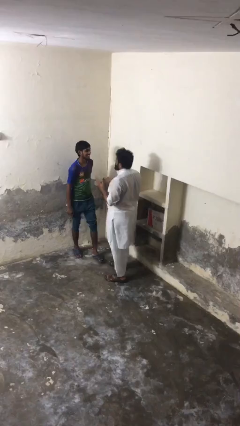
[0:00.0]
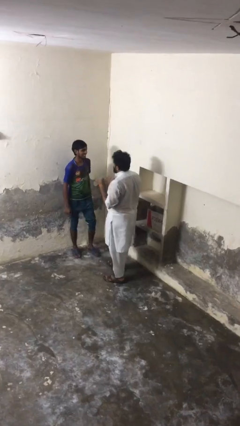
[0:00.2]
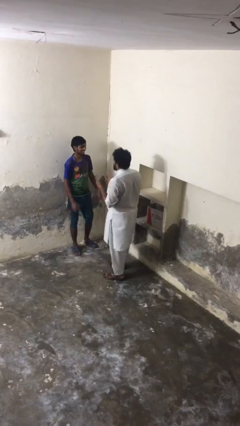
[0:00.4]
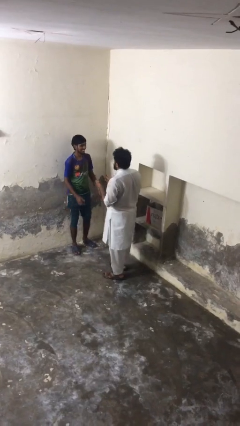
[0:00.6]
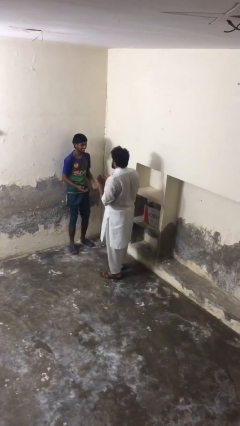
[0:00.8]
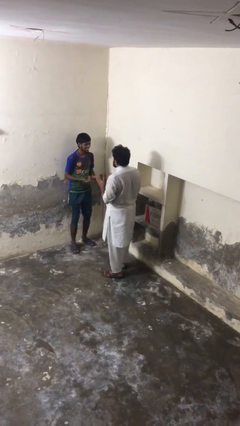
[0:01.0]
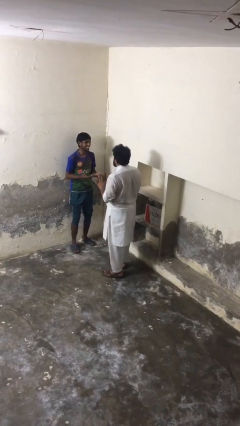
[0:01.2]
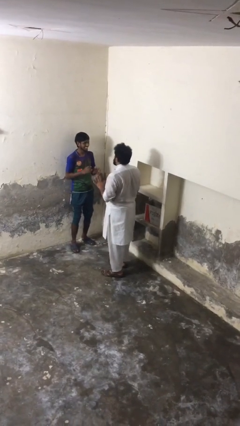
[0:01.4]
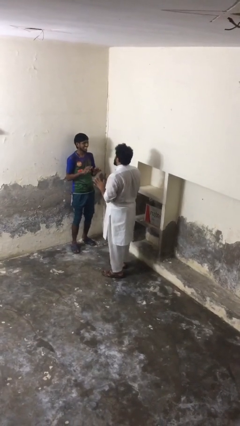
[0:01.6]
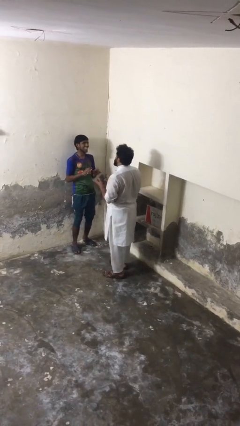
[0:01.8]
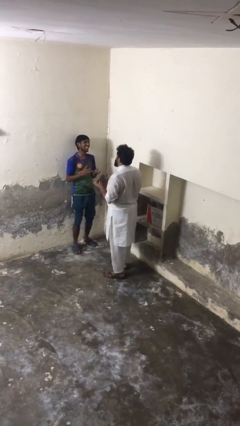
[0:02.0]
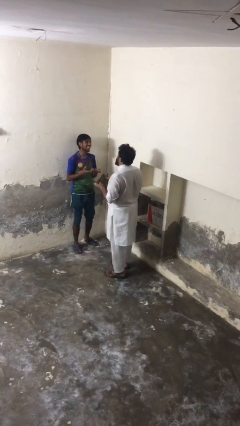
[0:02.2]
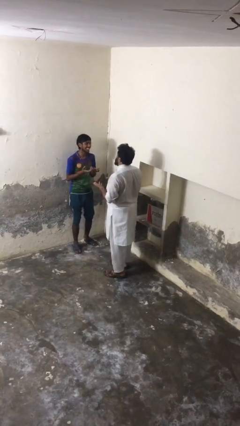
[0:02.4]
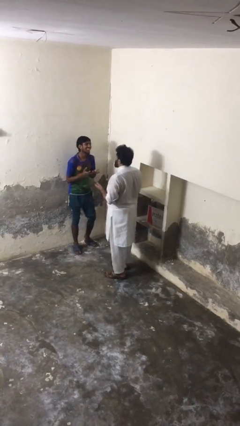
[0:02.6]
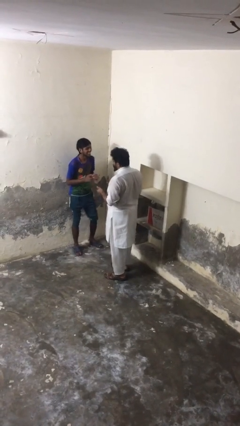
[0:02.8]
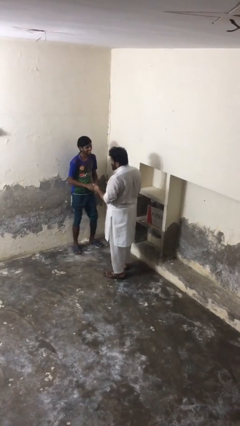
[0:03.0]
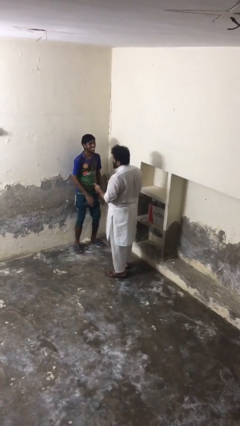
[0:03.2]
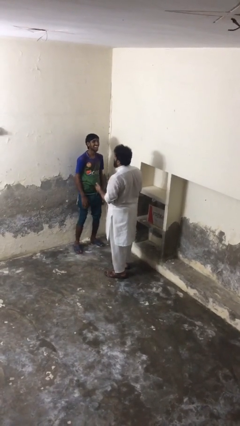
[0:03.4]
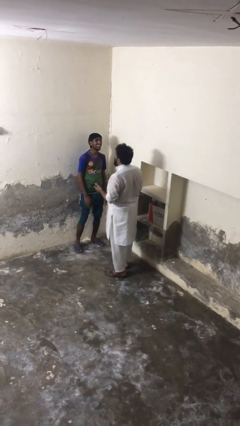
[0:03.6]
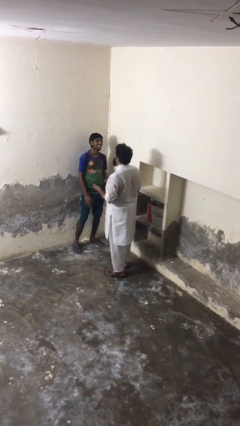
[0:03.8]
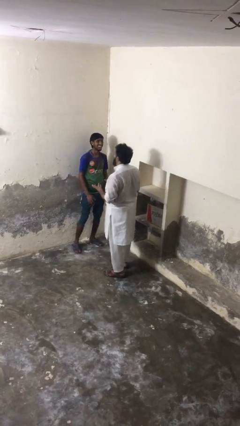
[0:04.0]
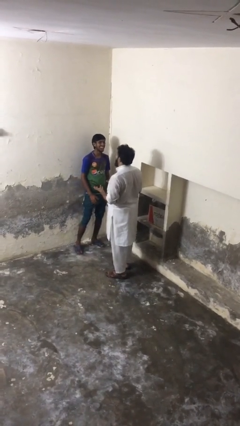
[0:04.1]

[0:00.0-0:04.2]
person talks to person

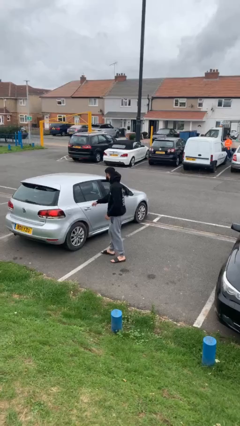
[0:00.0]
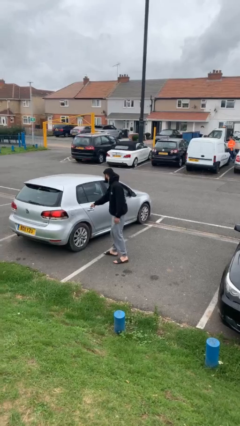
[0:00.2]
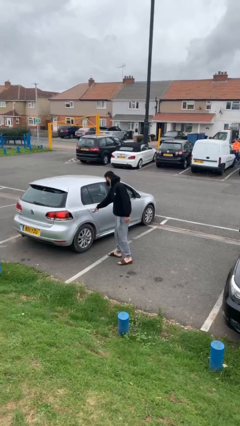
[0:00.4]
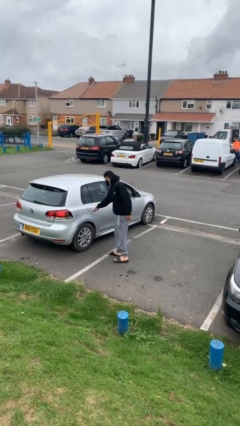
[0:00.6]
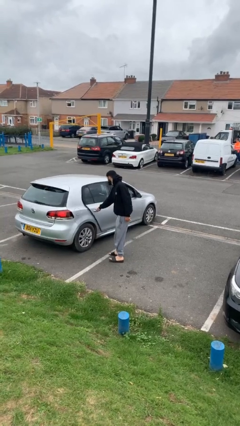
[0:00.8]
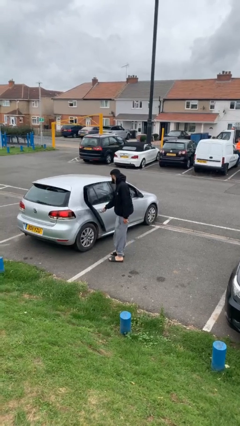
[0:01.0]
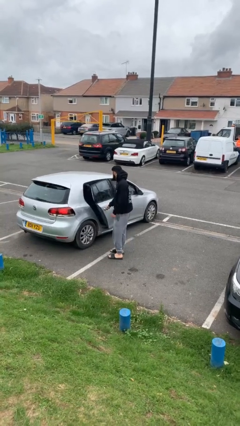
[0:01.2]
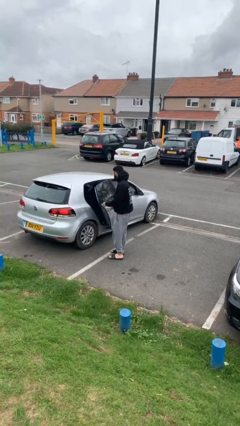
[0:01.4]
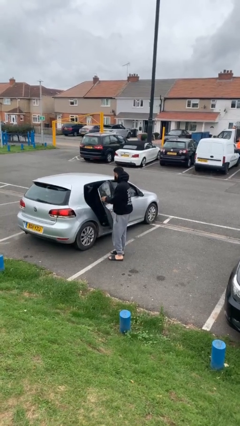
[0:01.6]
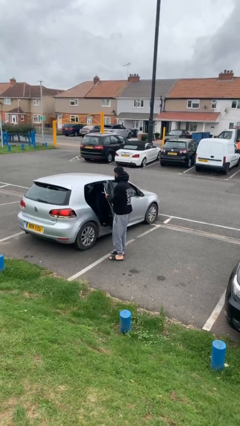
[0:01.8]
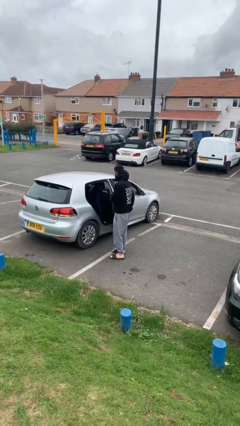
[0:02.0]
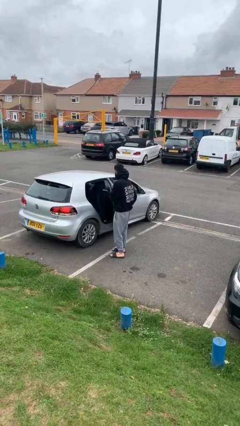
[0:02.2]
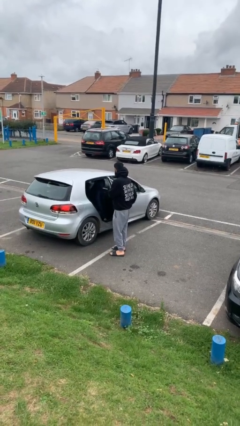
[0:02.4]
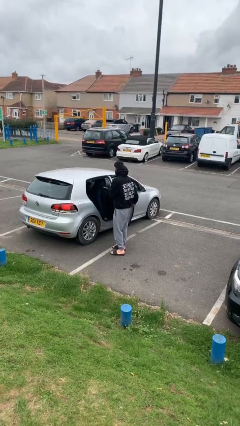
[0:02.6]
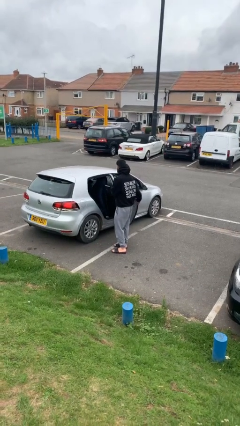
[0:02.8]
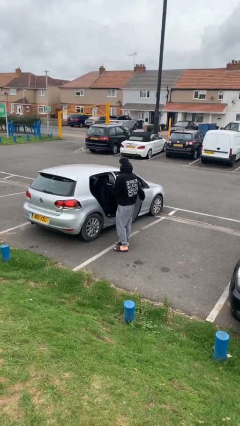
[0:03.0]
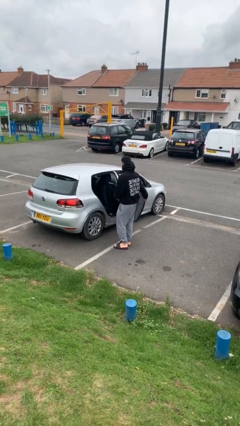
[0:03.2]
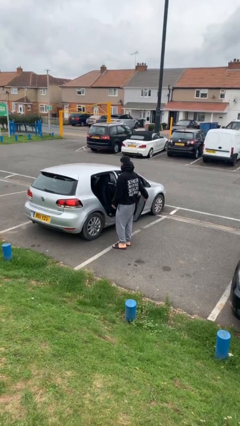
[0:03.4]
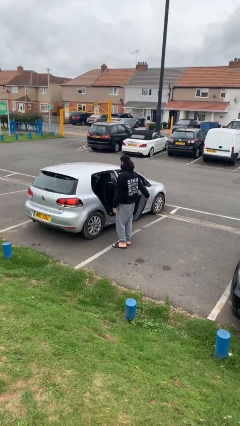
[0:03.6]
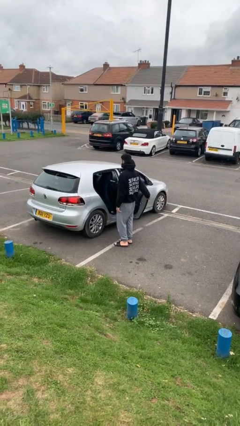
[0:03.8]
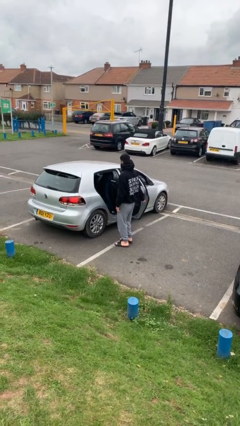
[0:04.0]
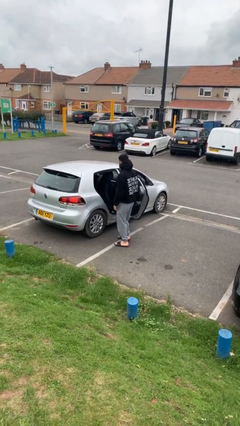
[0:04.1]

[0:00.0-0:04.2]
person opens car door

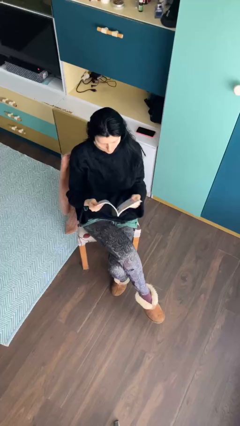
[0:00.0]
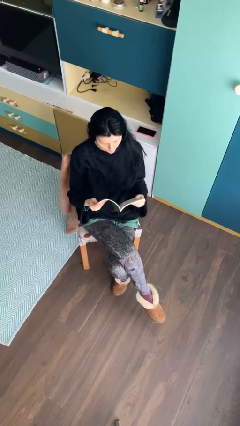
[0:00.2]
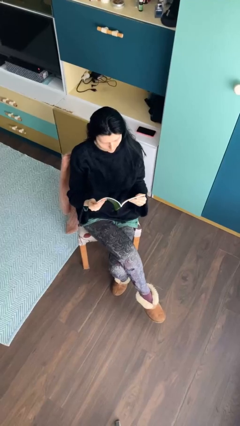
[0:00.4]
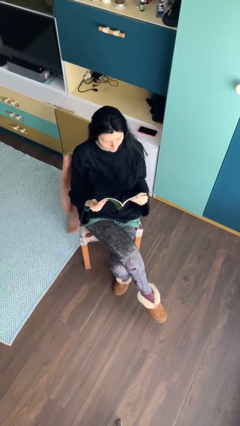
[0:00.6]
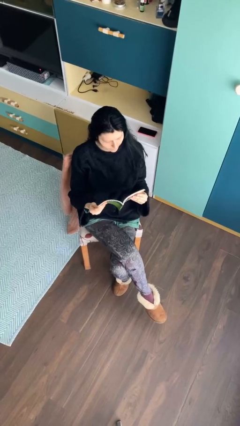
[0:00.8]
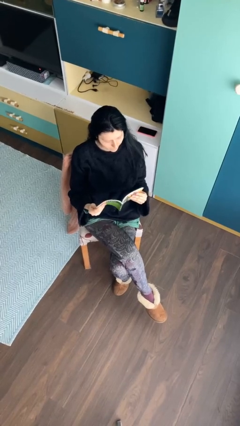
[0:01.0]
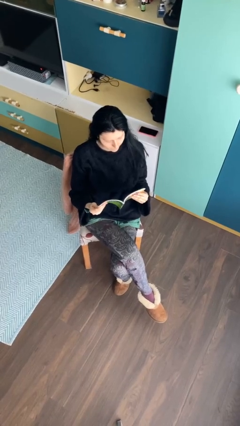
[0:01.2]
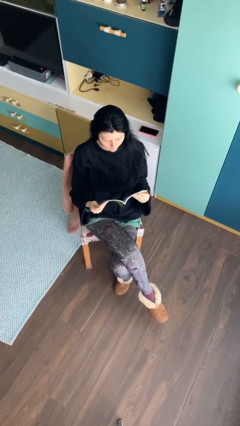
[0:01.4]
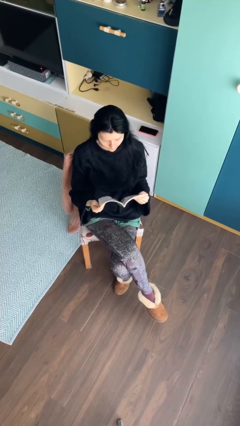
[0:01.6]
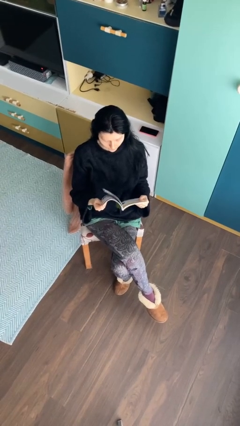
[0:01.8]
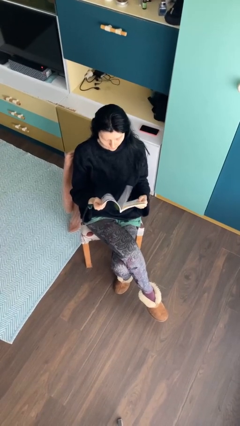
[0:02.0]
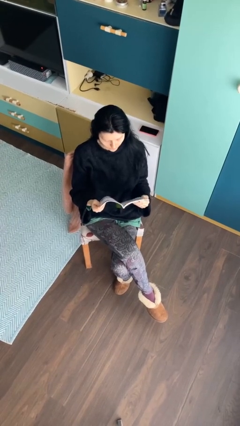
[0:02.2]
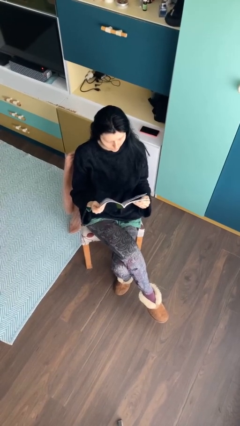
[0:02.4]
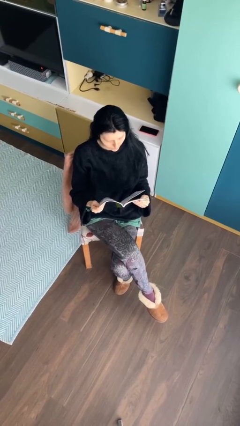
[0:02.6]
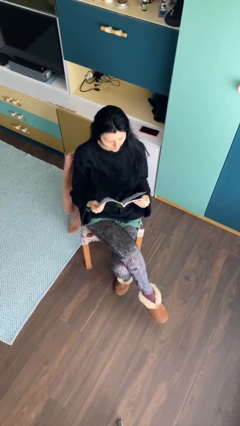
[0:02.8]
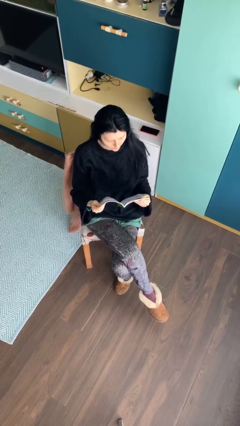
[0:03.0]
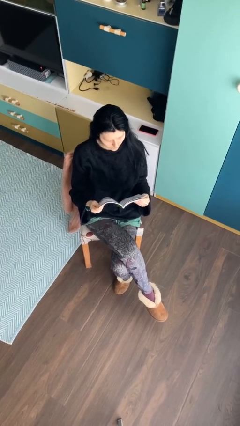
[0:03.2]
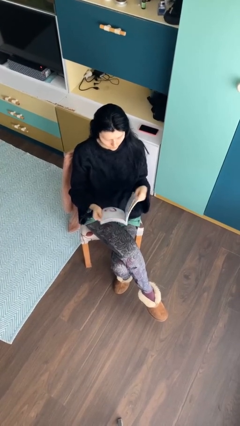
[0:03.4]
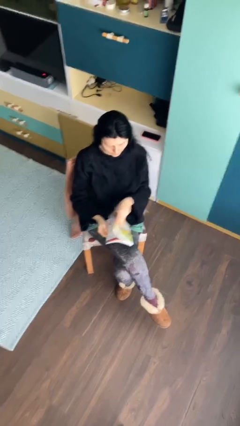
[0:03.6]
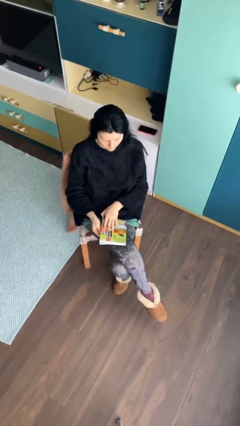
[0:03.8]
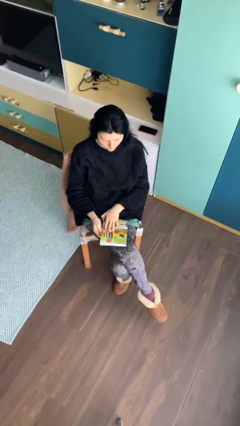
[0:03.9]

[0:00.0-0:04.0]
person reads document

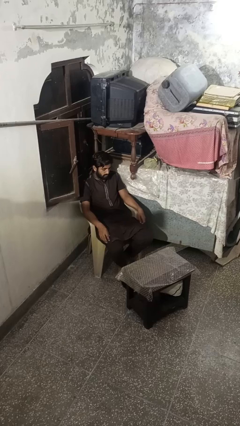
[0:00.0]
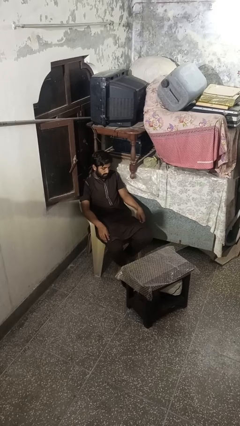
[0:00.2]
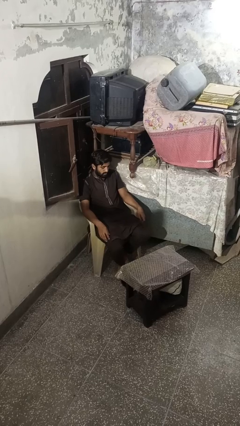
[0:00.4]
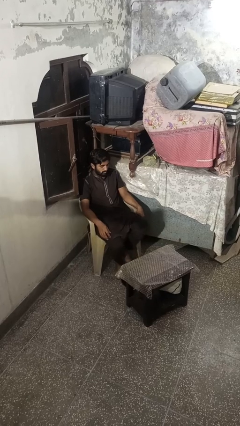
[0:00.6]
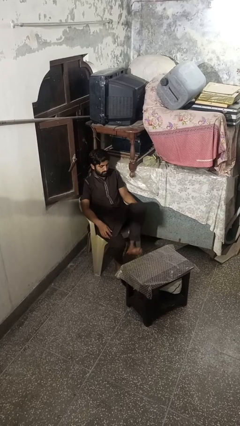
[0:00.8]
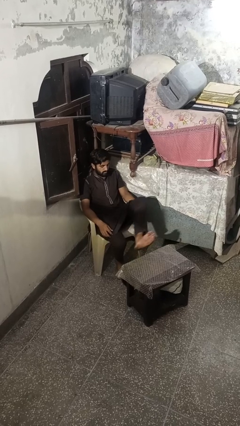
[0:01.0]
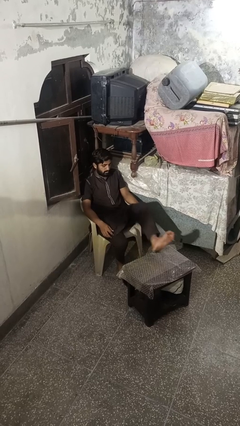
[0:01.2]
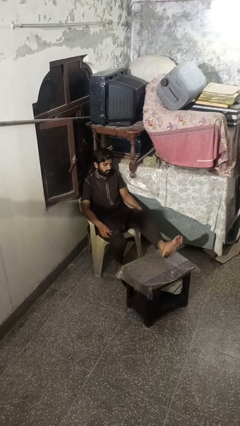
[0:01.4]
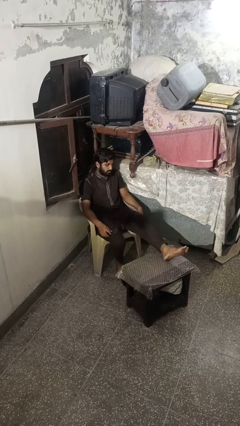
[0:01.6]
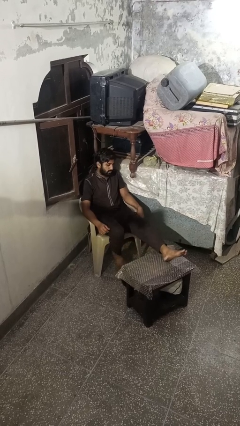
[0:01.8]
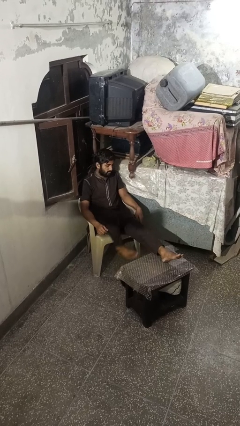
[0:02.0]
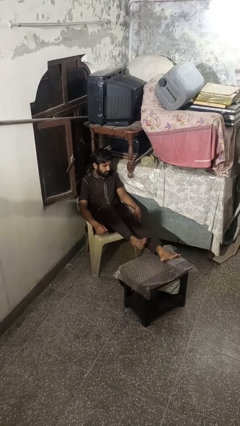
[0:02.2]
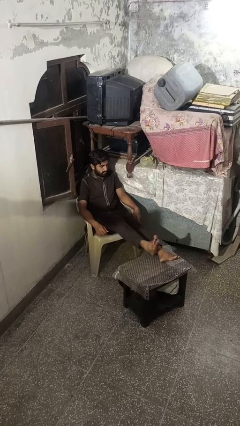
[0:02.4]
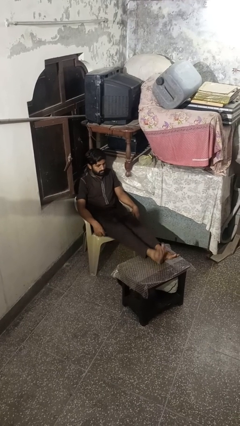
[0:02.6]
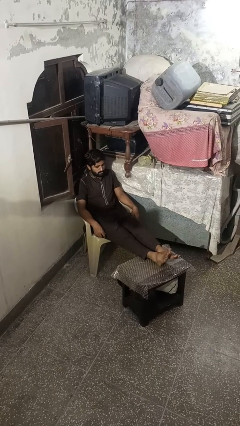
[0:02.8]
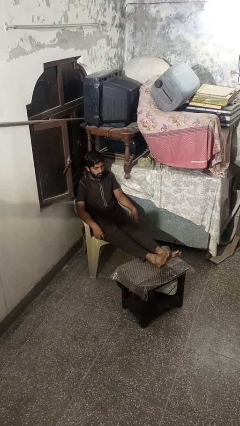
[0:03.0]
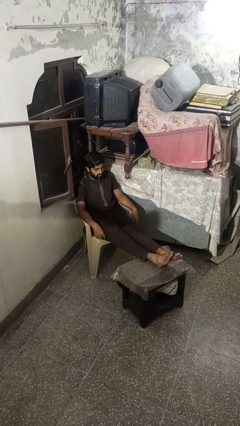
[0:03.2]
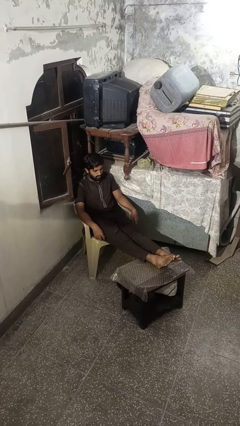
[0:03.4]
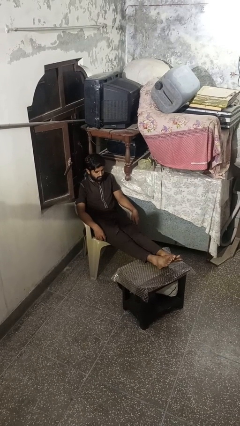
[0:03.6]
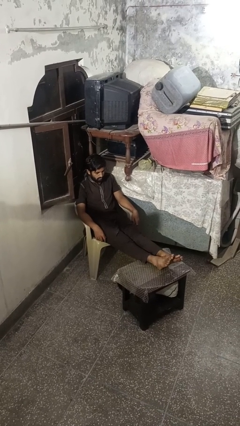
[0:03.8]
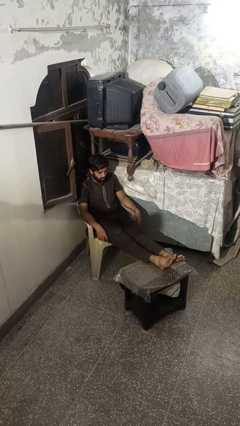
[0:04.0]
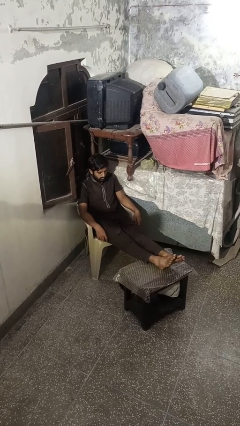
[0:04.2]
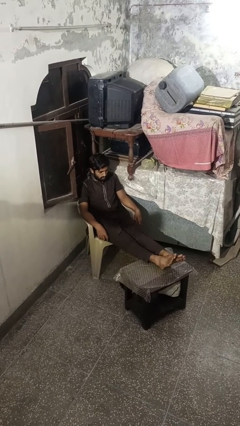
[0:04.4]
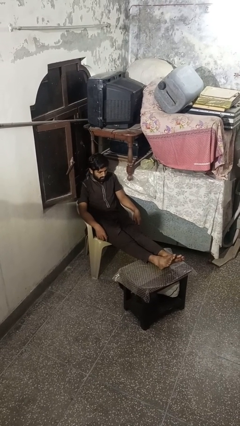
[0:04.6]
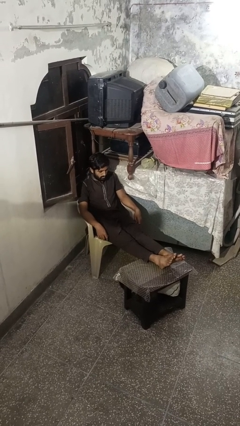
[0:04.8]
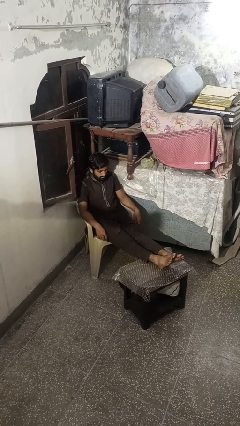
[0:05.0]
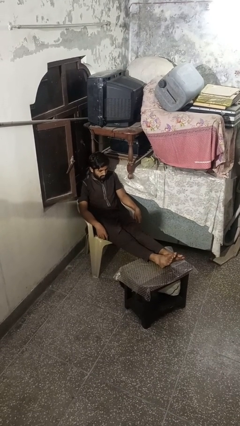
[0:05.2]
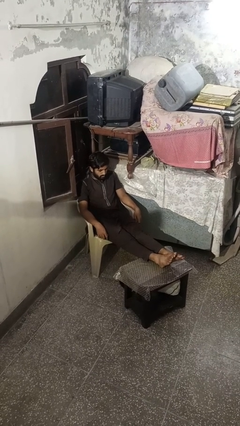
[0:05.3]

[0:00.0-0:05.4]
person puts feet up
